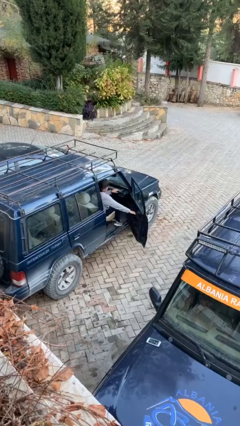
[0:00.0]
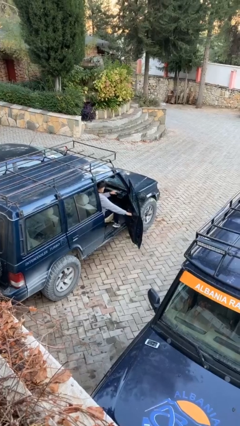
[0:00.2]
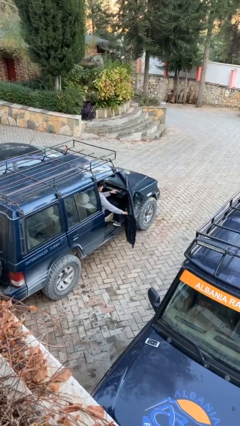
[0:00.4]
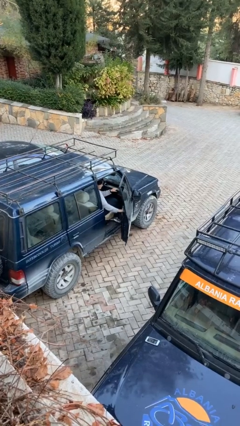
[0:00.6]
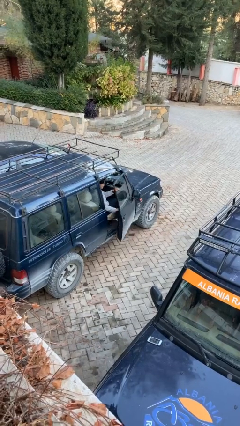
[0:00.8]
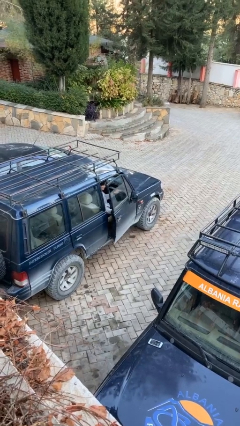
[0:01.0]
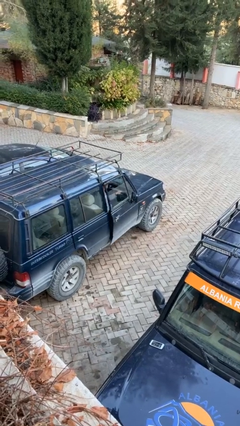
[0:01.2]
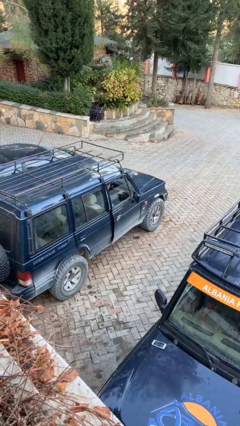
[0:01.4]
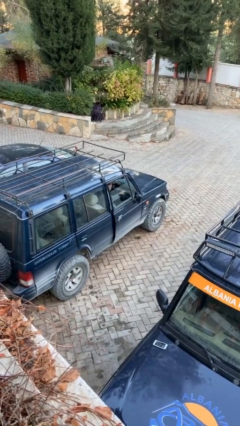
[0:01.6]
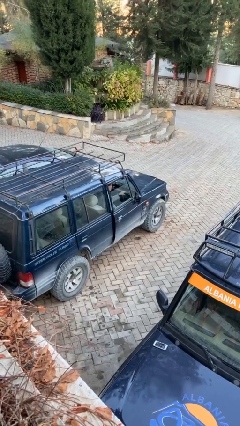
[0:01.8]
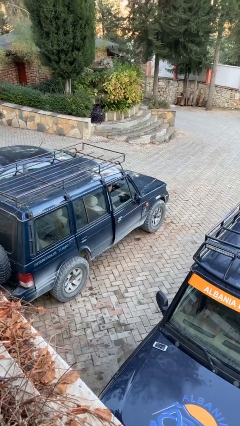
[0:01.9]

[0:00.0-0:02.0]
person closes car door

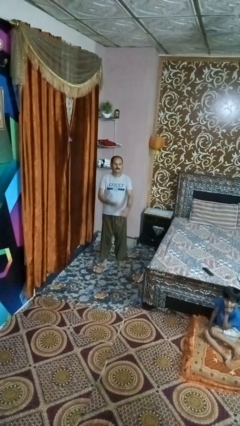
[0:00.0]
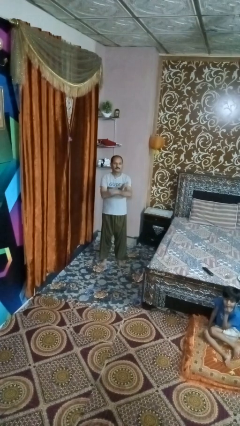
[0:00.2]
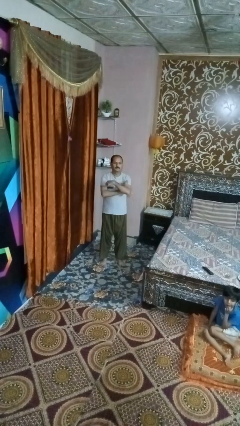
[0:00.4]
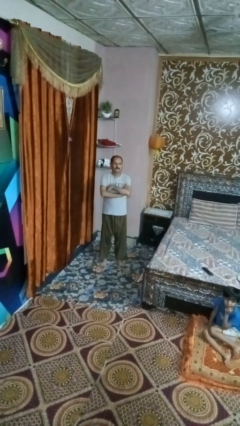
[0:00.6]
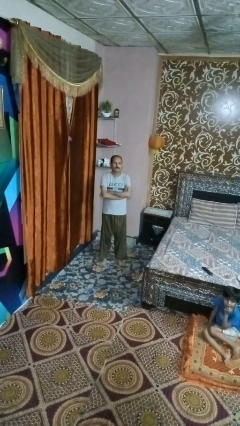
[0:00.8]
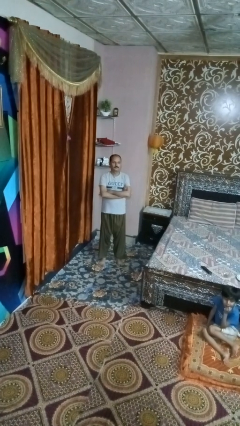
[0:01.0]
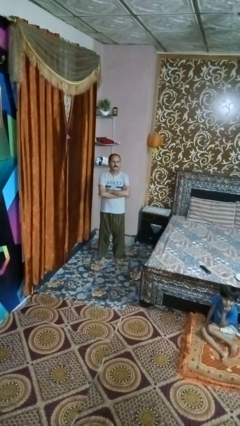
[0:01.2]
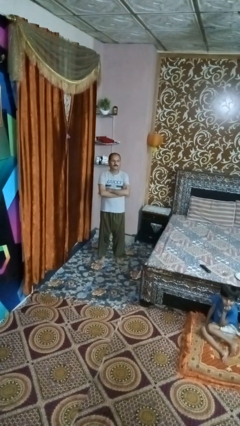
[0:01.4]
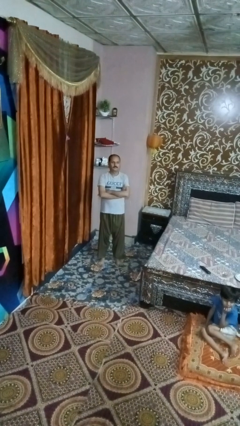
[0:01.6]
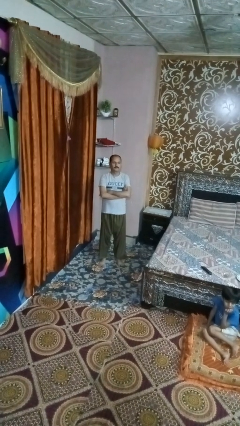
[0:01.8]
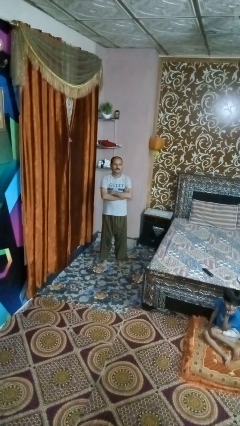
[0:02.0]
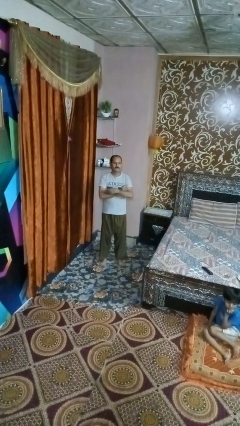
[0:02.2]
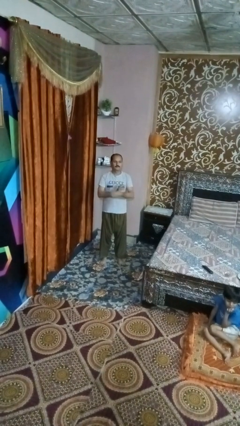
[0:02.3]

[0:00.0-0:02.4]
person crosses arms

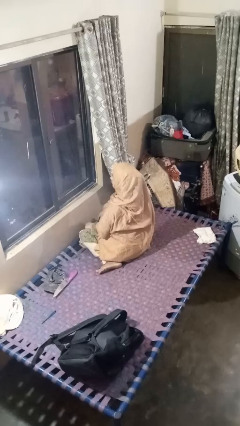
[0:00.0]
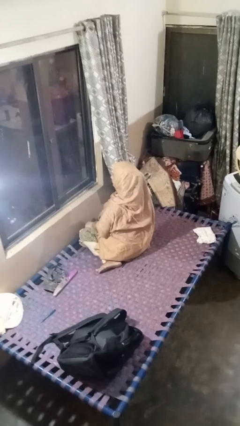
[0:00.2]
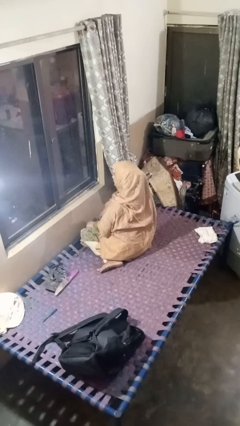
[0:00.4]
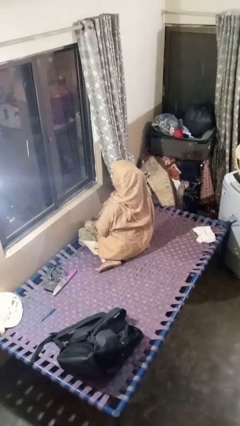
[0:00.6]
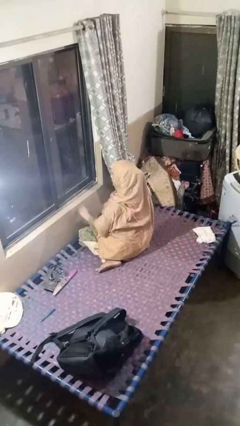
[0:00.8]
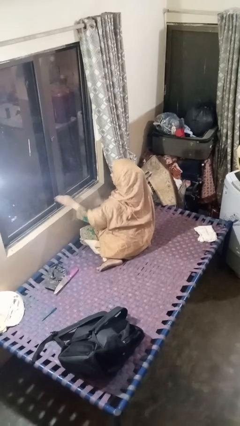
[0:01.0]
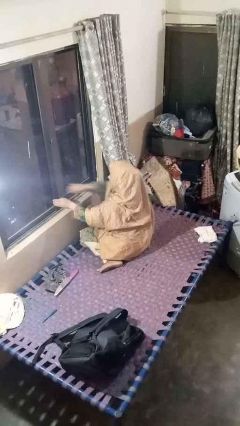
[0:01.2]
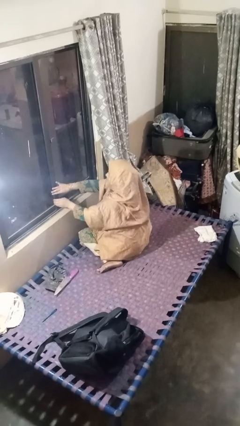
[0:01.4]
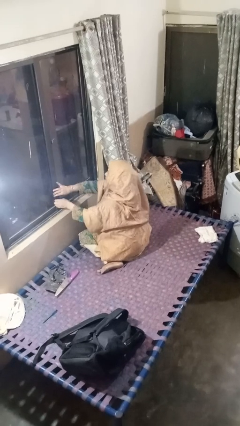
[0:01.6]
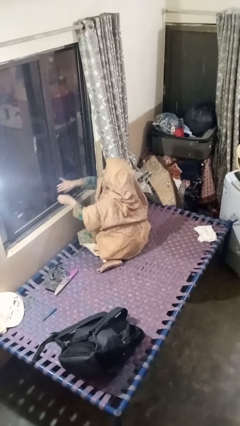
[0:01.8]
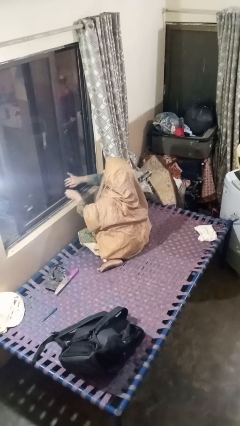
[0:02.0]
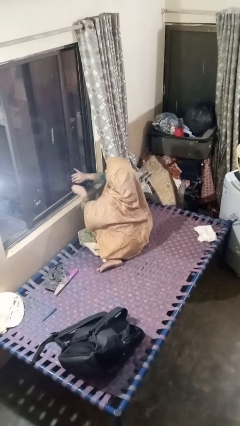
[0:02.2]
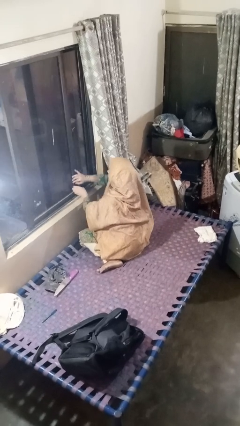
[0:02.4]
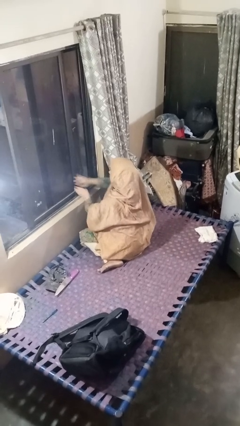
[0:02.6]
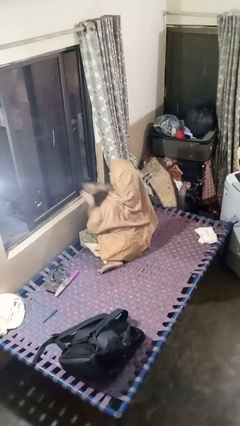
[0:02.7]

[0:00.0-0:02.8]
person opens home window

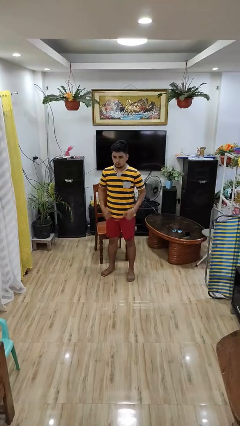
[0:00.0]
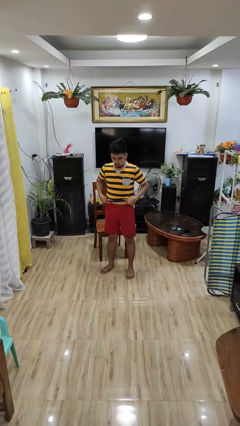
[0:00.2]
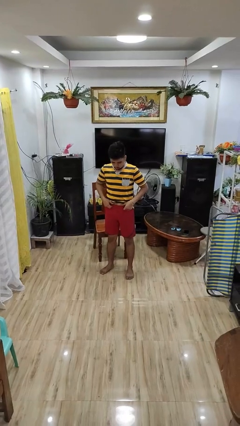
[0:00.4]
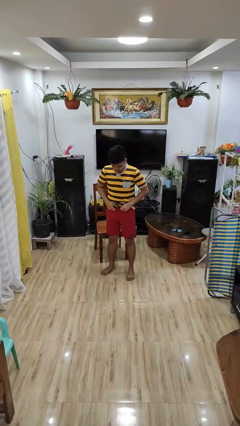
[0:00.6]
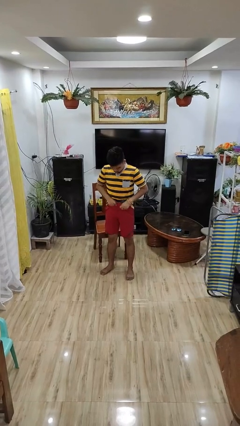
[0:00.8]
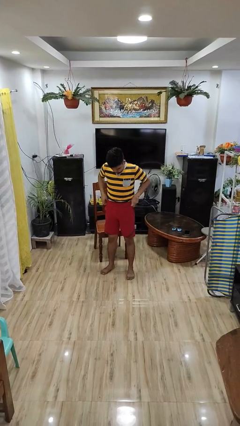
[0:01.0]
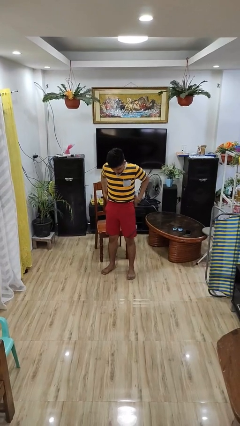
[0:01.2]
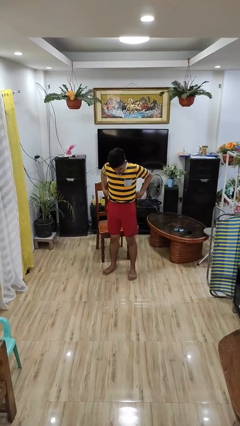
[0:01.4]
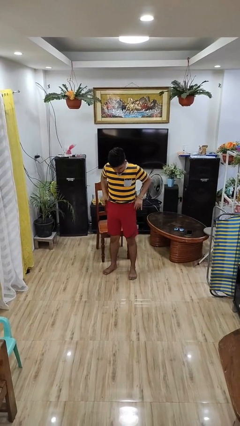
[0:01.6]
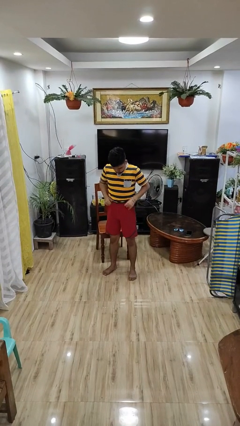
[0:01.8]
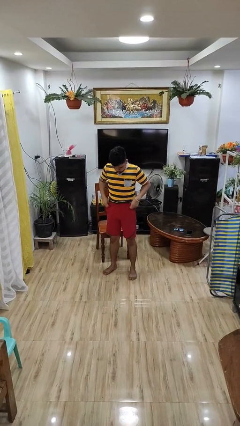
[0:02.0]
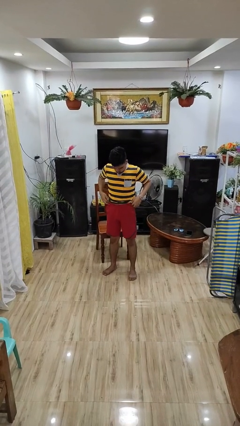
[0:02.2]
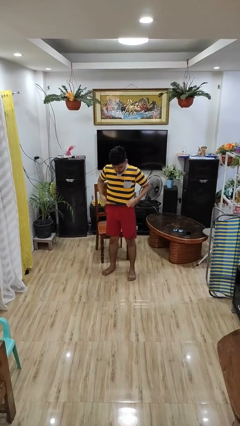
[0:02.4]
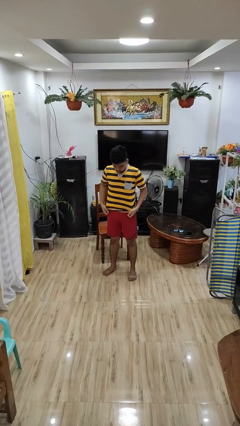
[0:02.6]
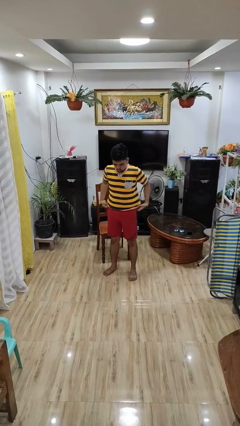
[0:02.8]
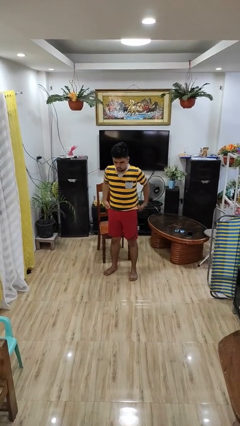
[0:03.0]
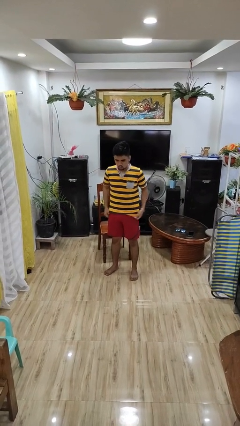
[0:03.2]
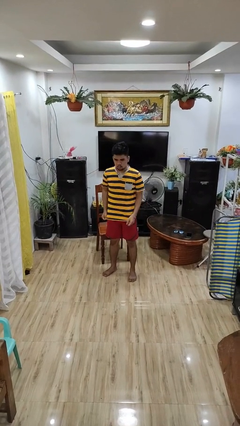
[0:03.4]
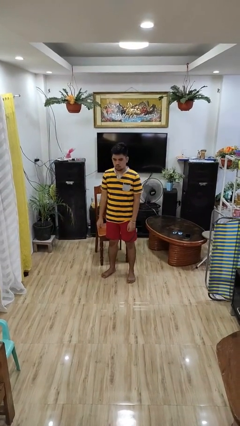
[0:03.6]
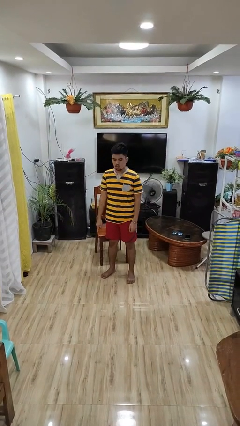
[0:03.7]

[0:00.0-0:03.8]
person hikes up pants

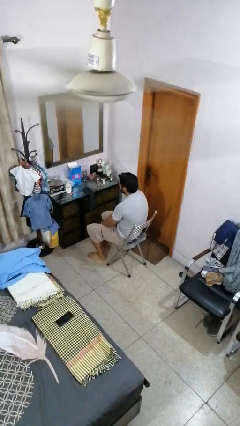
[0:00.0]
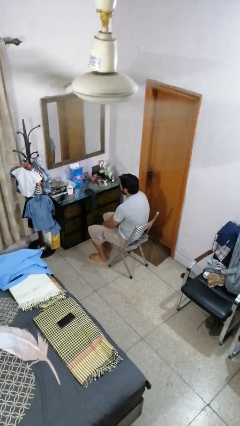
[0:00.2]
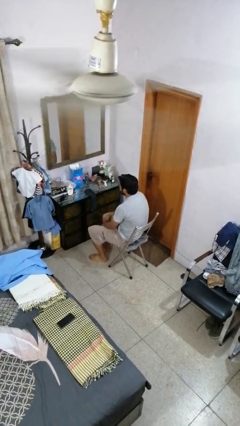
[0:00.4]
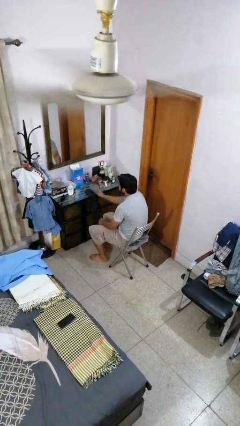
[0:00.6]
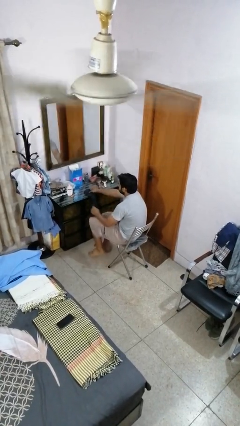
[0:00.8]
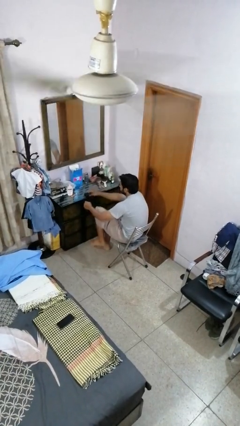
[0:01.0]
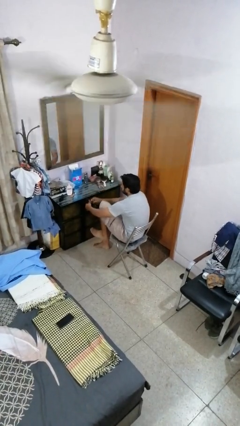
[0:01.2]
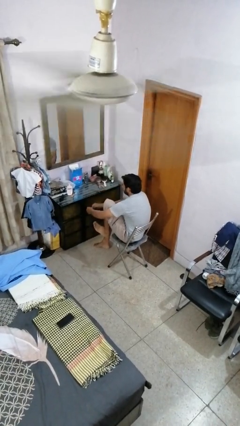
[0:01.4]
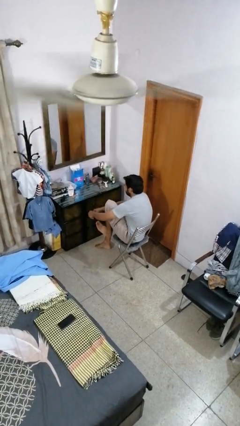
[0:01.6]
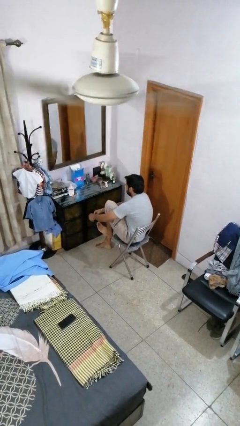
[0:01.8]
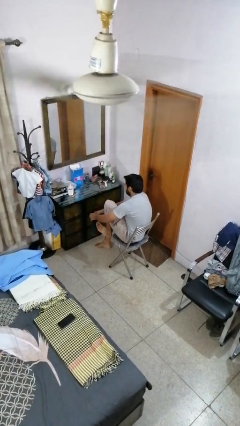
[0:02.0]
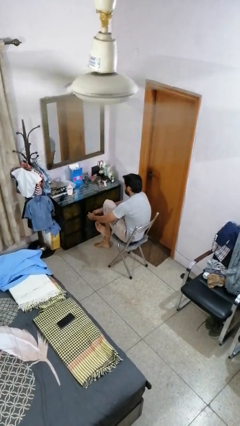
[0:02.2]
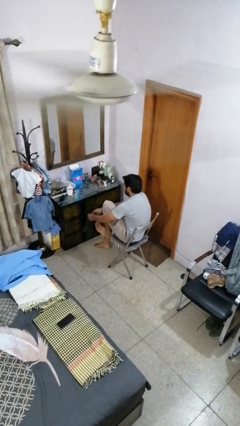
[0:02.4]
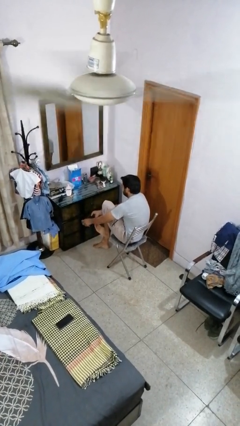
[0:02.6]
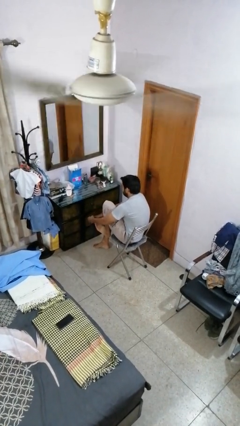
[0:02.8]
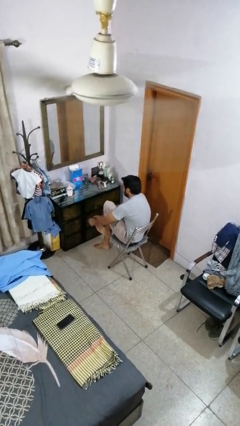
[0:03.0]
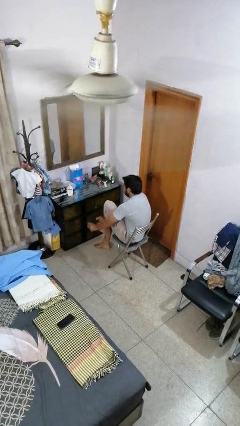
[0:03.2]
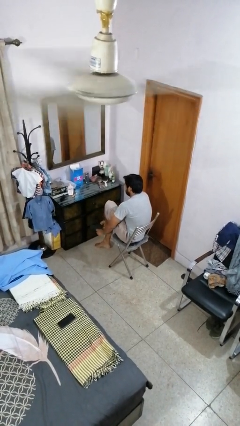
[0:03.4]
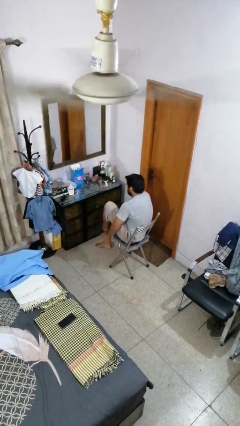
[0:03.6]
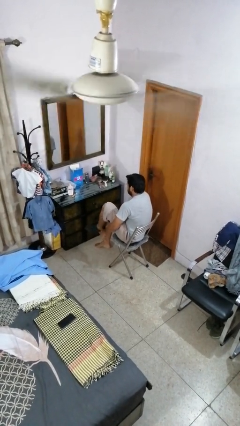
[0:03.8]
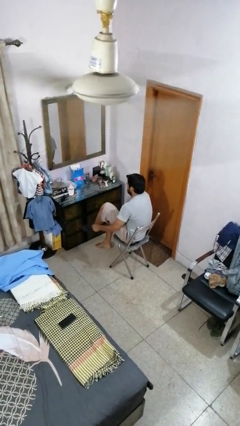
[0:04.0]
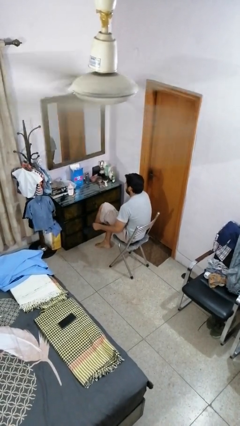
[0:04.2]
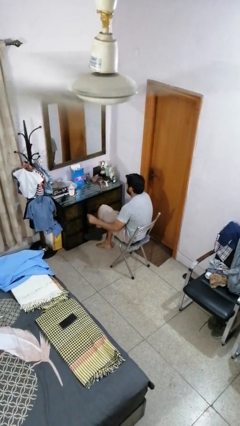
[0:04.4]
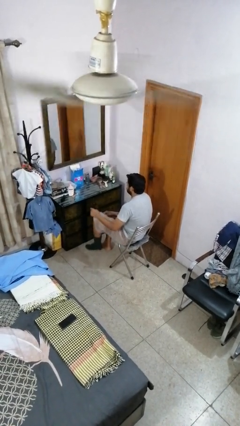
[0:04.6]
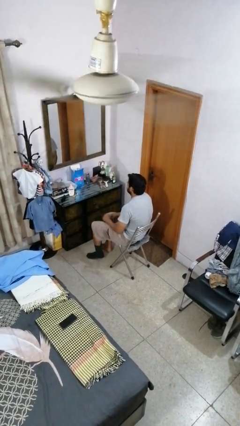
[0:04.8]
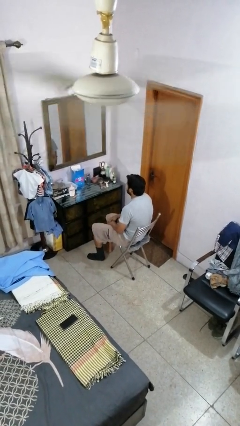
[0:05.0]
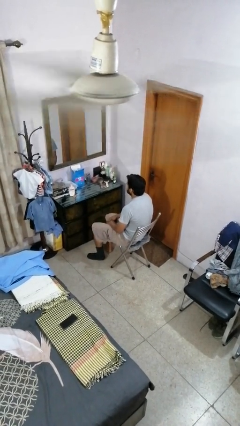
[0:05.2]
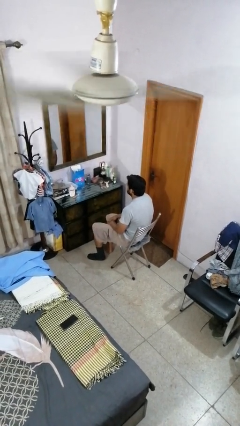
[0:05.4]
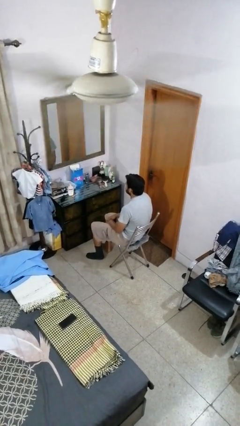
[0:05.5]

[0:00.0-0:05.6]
person puts on socks

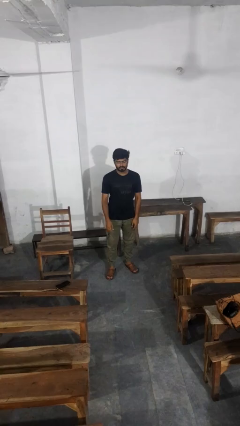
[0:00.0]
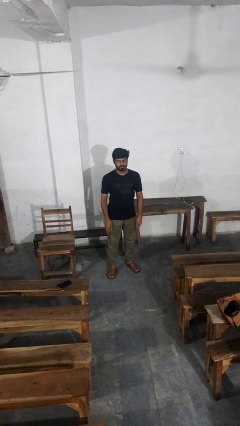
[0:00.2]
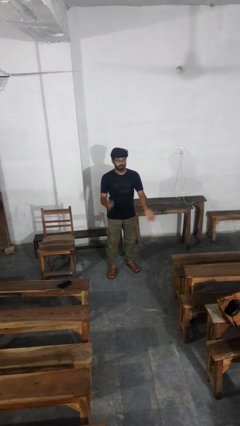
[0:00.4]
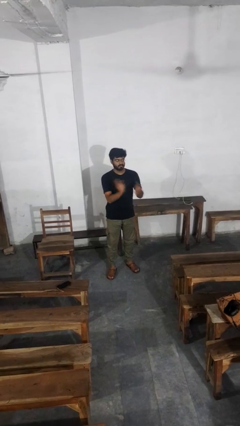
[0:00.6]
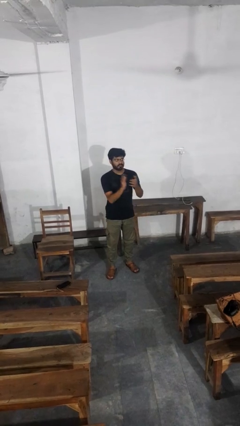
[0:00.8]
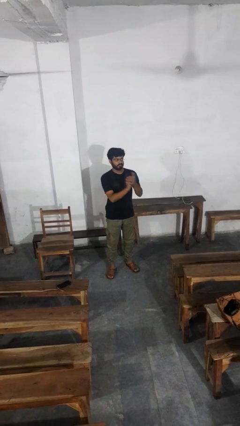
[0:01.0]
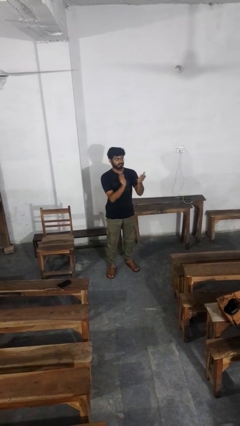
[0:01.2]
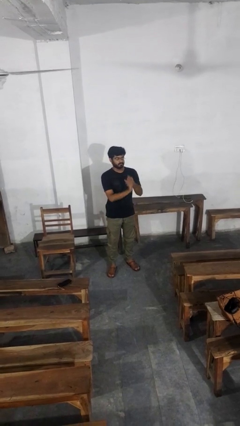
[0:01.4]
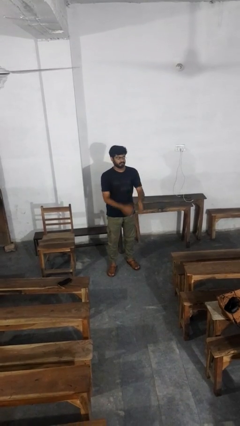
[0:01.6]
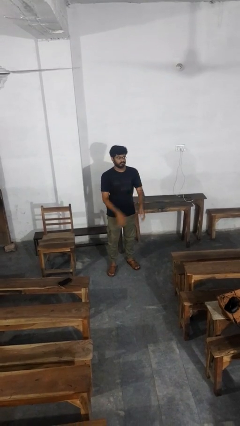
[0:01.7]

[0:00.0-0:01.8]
person claps hands
